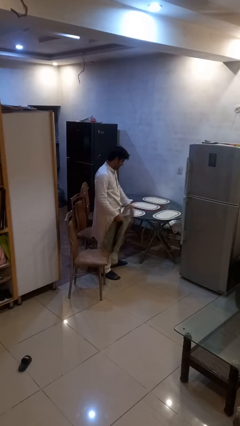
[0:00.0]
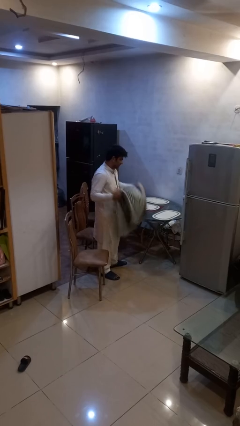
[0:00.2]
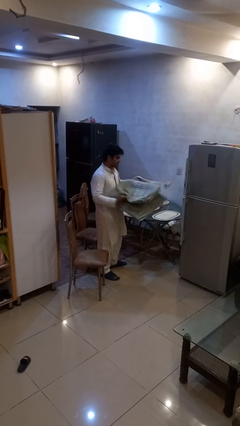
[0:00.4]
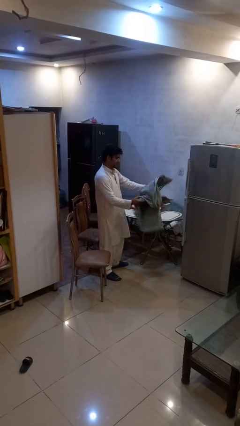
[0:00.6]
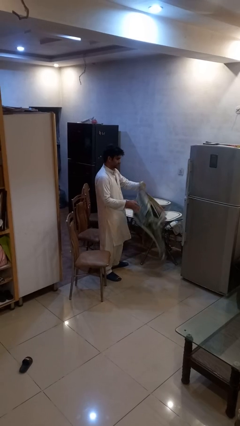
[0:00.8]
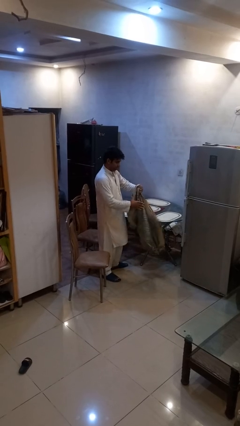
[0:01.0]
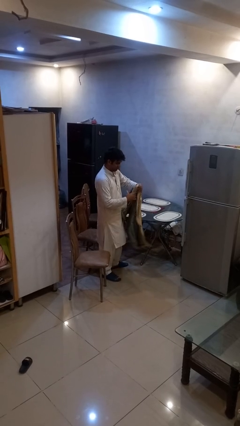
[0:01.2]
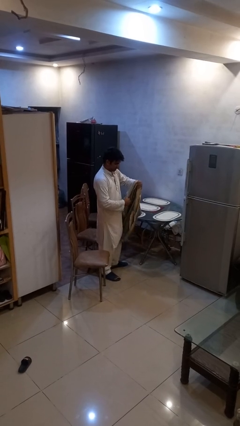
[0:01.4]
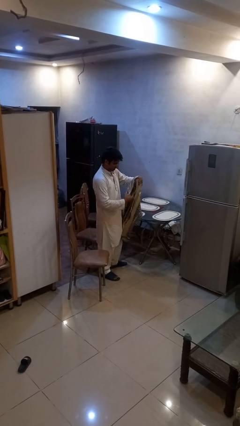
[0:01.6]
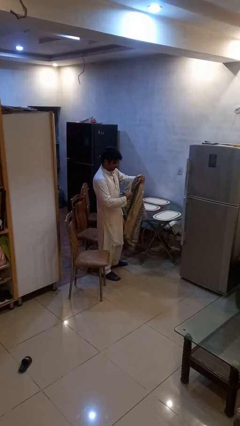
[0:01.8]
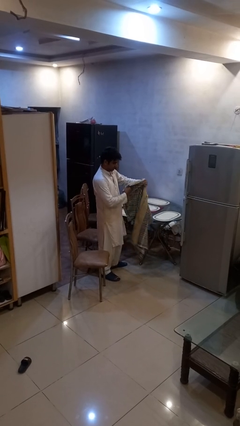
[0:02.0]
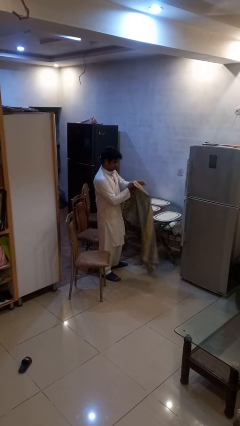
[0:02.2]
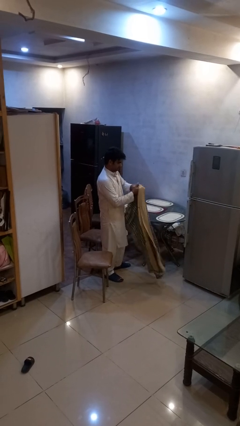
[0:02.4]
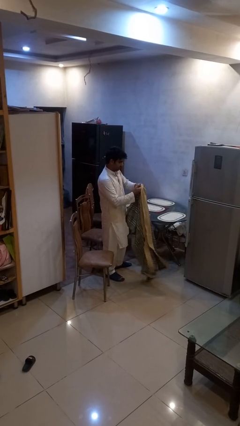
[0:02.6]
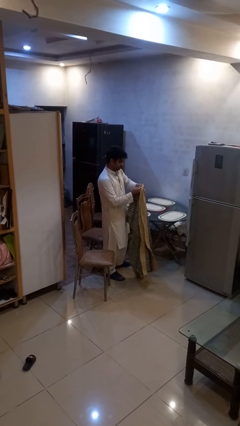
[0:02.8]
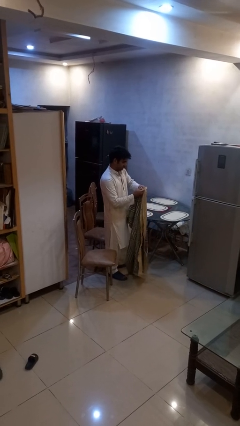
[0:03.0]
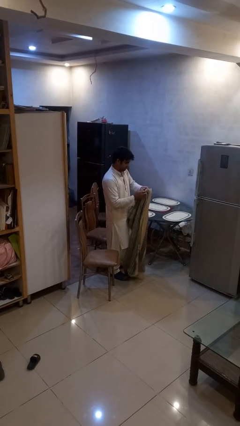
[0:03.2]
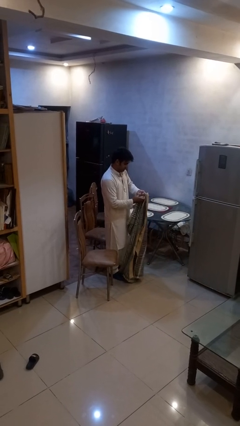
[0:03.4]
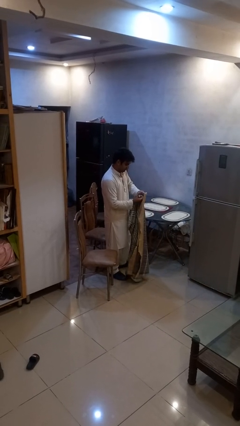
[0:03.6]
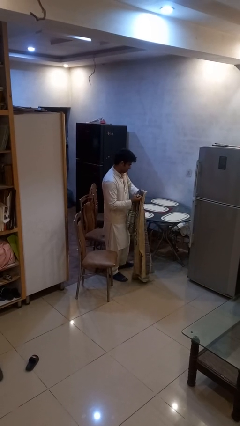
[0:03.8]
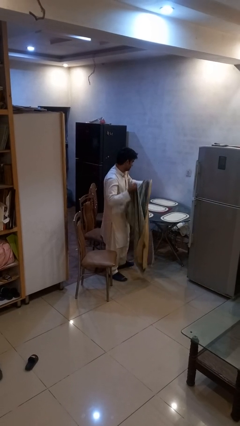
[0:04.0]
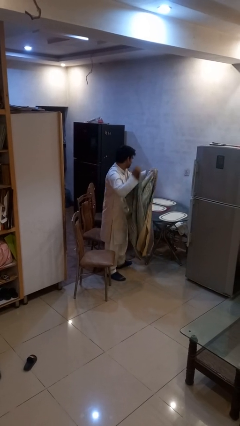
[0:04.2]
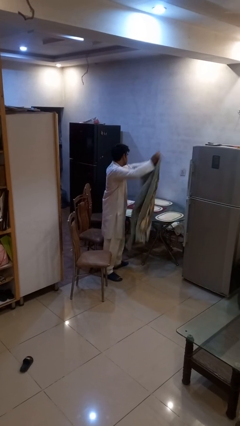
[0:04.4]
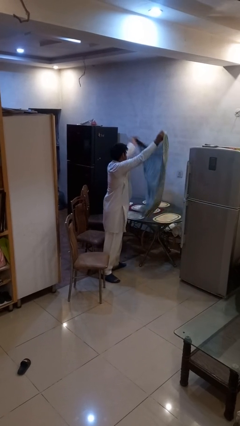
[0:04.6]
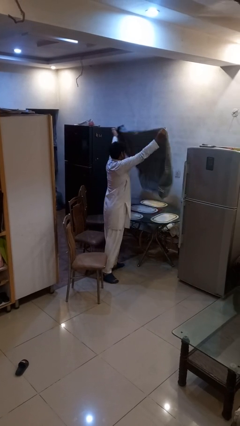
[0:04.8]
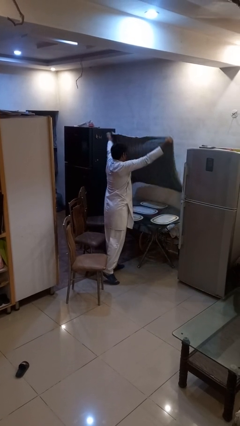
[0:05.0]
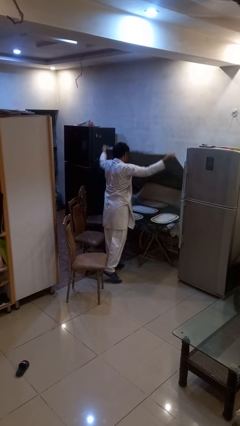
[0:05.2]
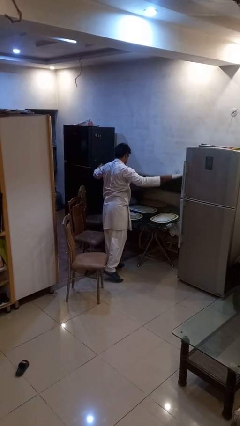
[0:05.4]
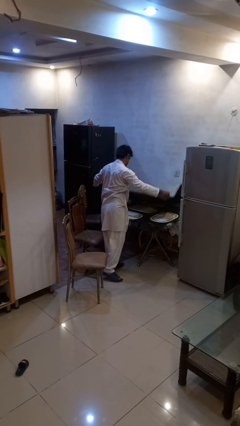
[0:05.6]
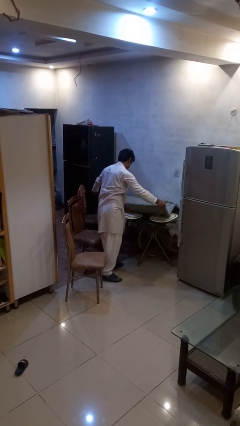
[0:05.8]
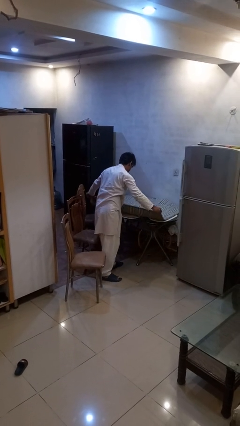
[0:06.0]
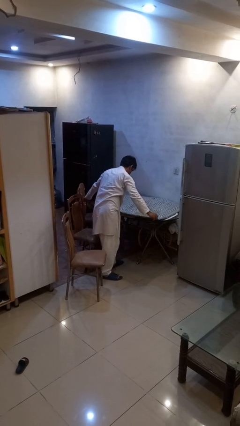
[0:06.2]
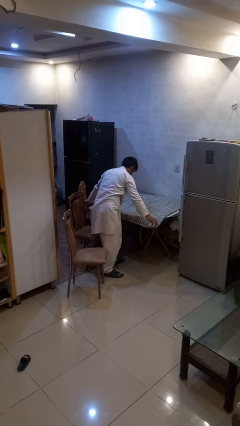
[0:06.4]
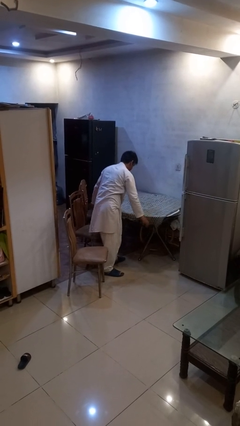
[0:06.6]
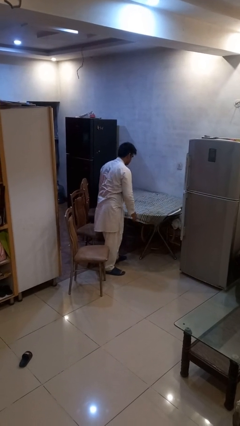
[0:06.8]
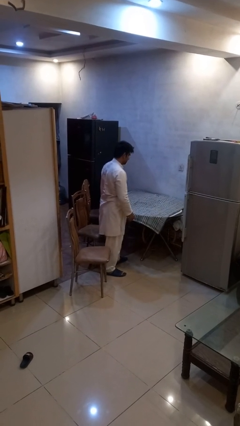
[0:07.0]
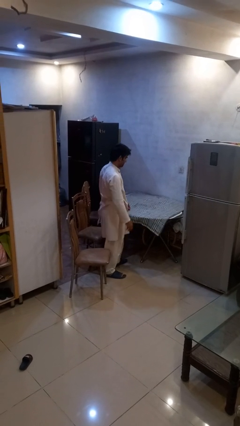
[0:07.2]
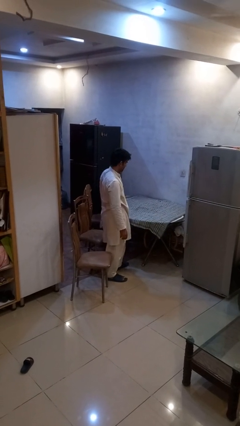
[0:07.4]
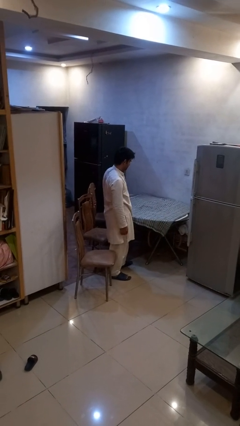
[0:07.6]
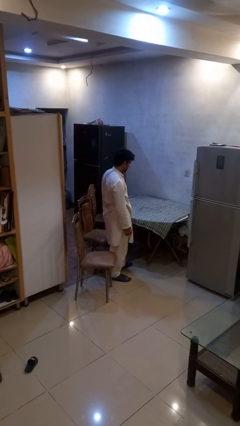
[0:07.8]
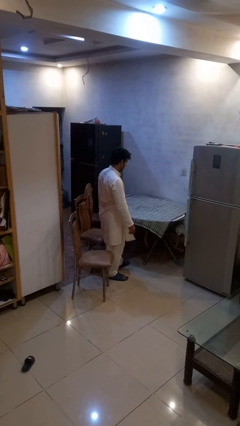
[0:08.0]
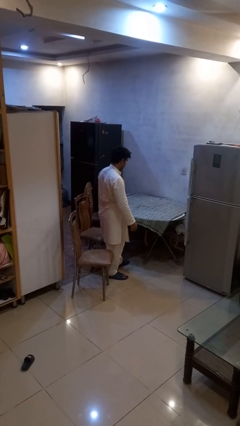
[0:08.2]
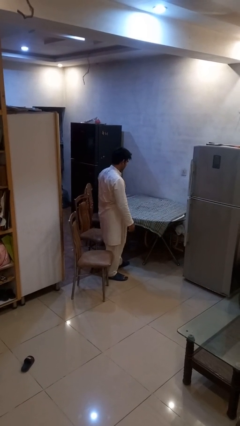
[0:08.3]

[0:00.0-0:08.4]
person spreads tablecloth

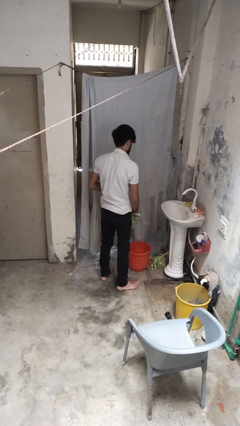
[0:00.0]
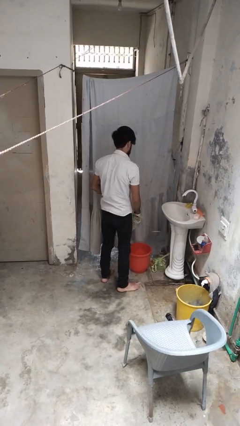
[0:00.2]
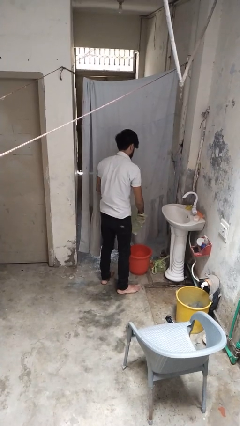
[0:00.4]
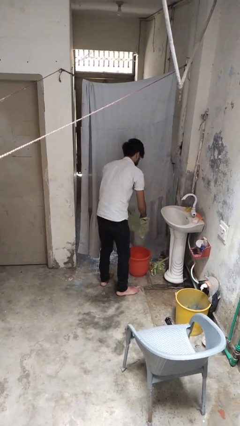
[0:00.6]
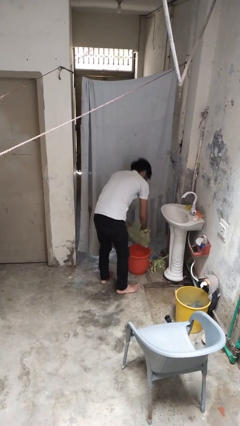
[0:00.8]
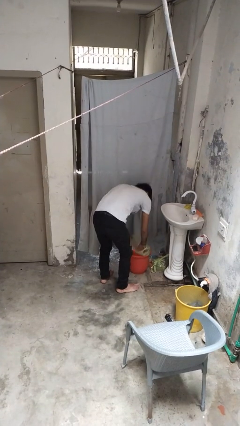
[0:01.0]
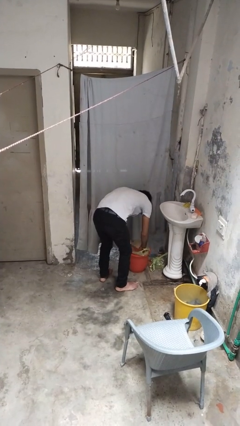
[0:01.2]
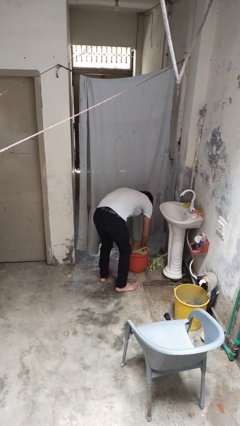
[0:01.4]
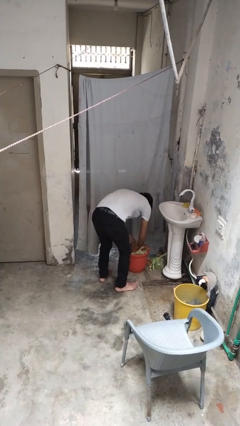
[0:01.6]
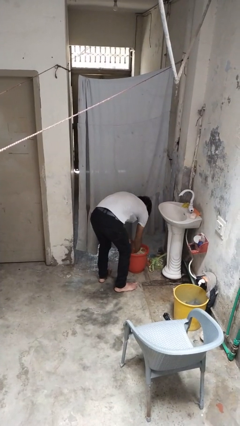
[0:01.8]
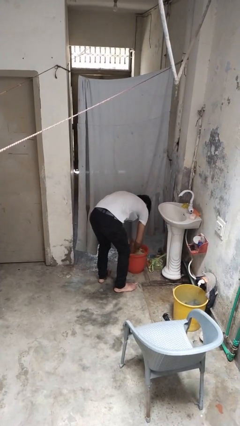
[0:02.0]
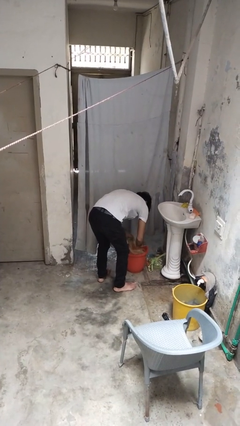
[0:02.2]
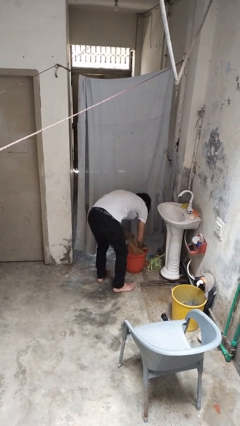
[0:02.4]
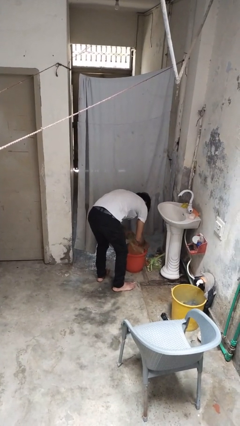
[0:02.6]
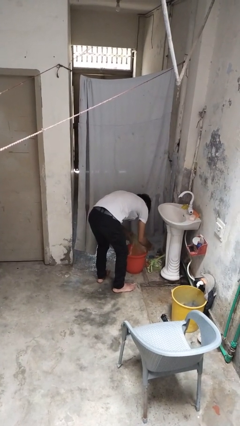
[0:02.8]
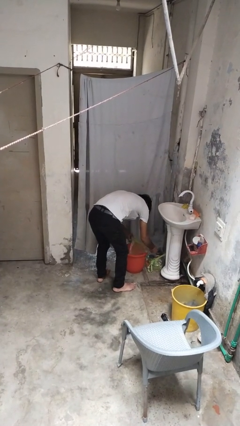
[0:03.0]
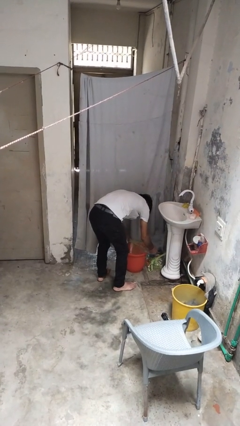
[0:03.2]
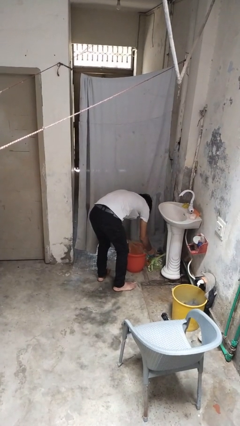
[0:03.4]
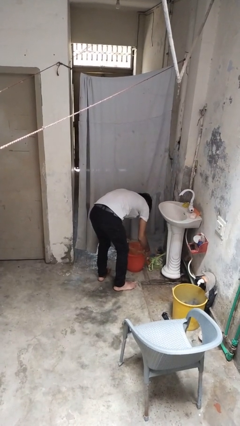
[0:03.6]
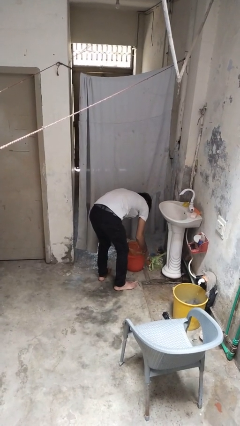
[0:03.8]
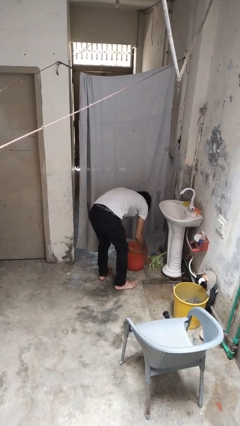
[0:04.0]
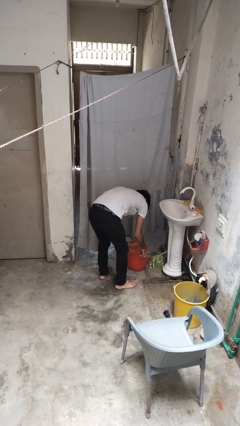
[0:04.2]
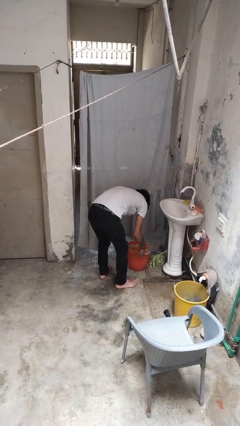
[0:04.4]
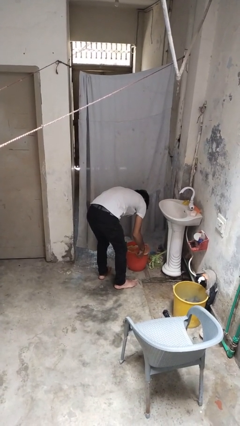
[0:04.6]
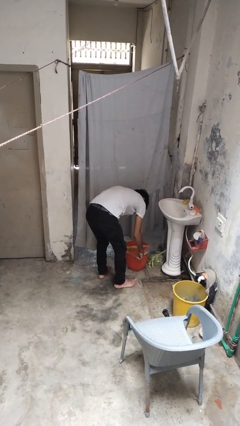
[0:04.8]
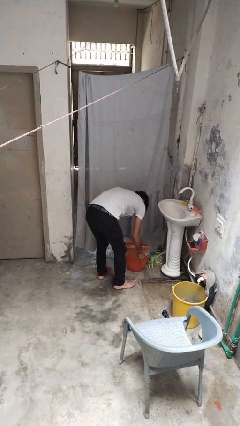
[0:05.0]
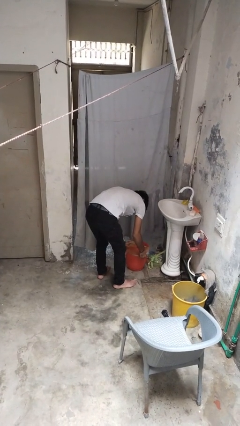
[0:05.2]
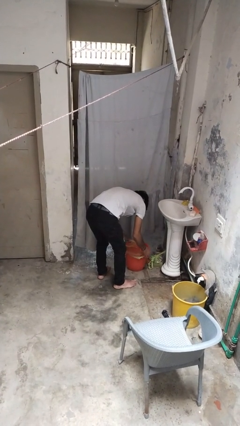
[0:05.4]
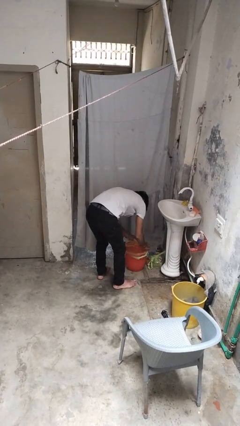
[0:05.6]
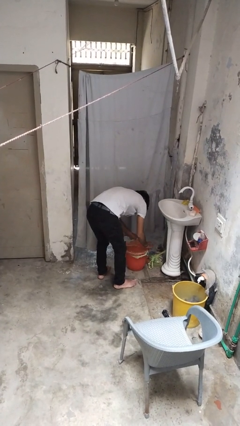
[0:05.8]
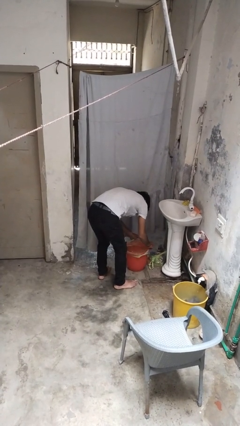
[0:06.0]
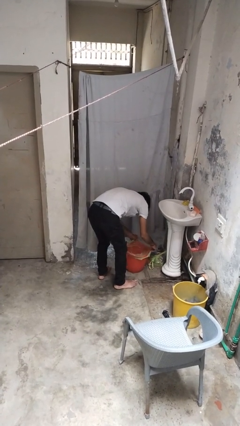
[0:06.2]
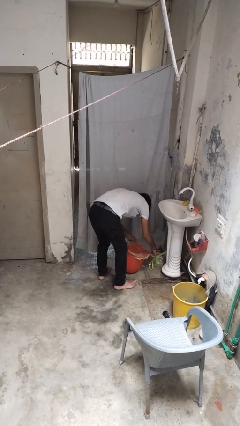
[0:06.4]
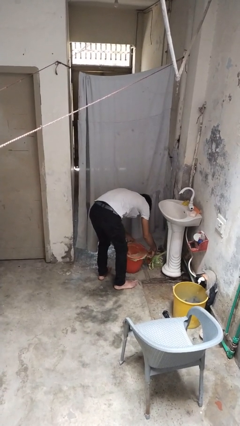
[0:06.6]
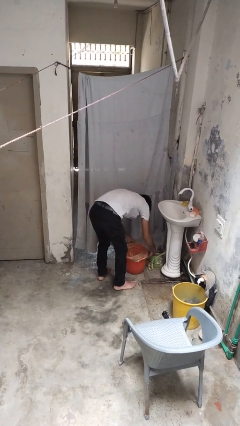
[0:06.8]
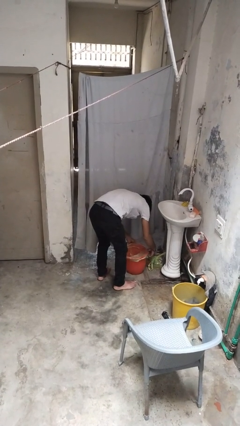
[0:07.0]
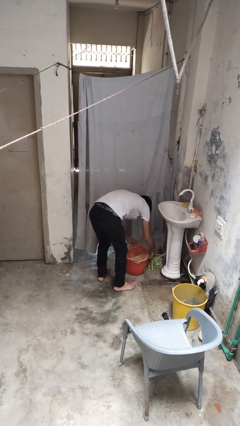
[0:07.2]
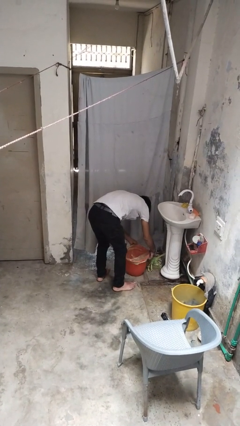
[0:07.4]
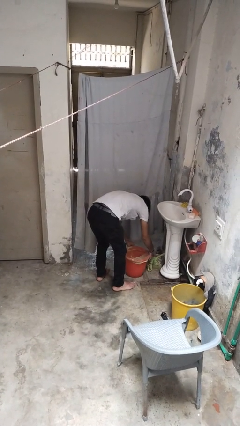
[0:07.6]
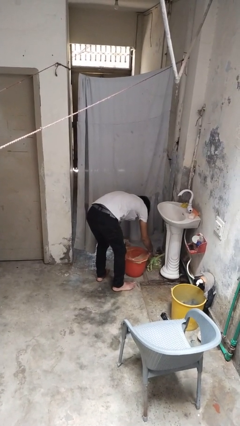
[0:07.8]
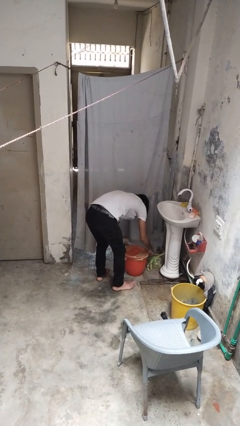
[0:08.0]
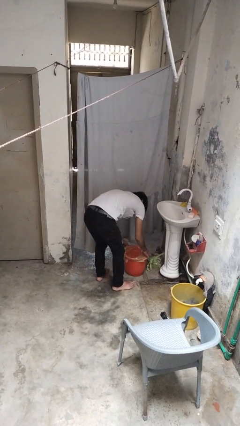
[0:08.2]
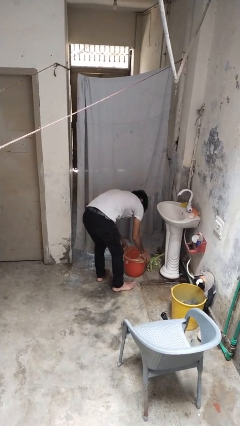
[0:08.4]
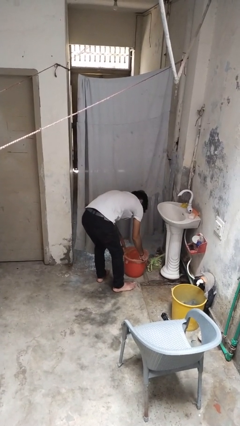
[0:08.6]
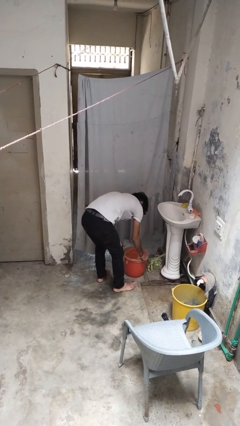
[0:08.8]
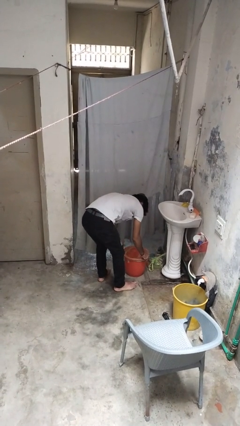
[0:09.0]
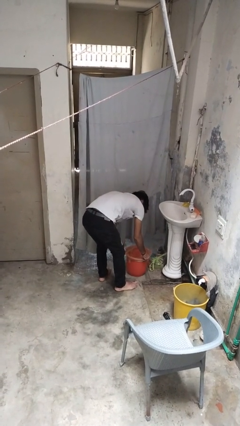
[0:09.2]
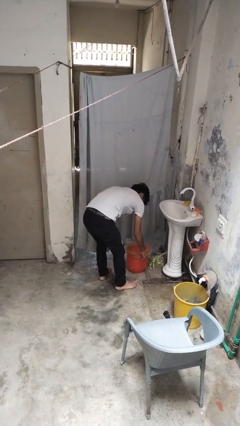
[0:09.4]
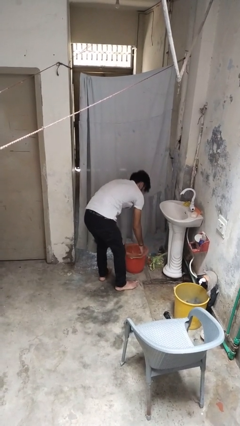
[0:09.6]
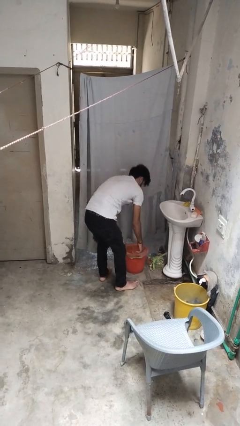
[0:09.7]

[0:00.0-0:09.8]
person inserts trashbag into trashcan

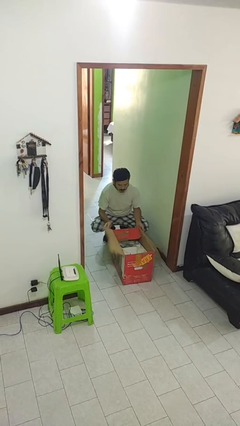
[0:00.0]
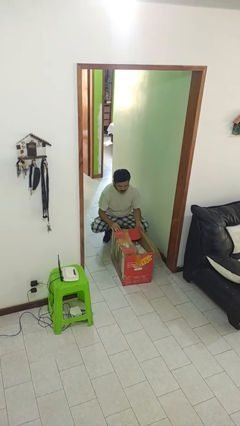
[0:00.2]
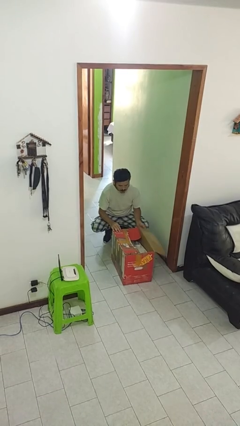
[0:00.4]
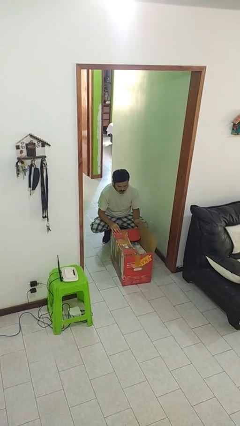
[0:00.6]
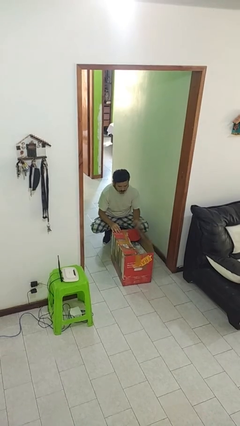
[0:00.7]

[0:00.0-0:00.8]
person closes box
